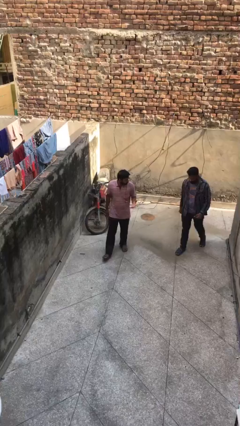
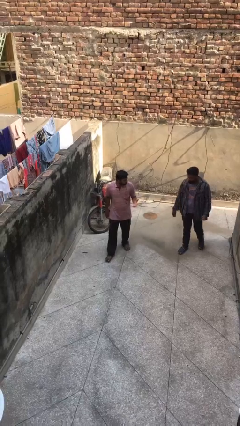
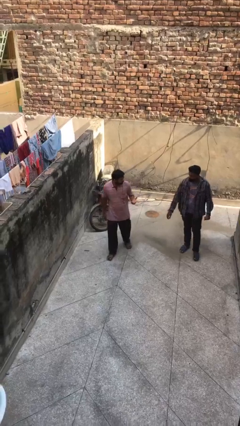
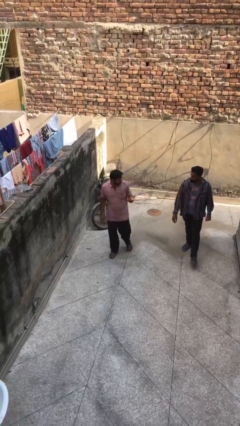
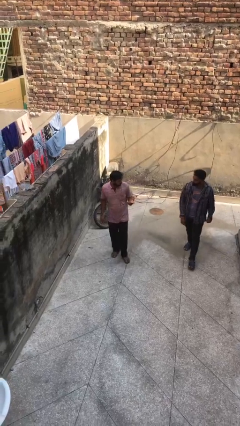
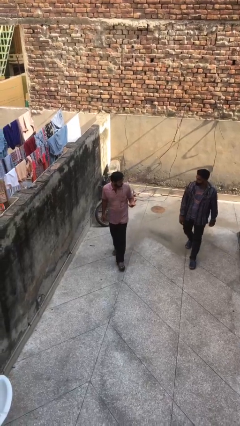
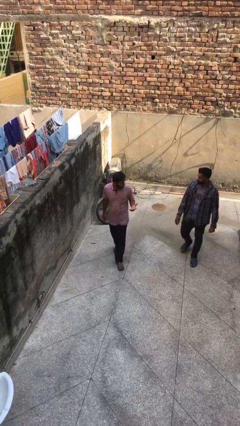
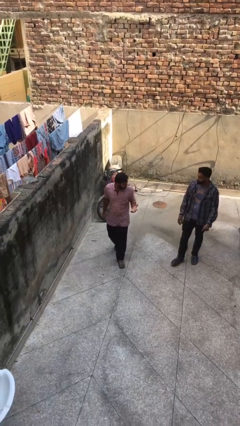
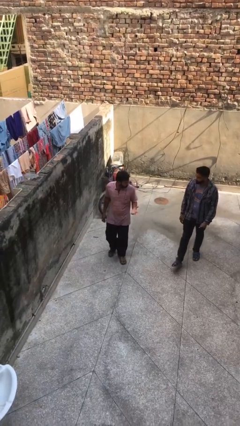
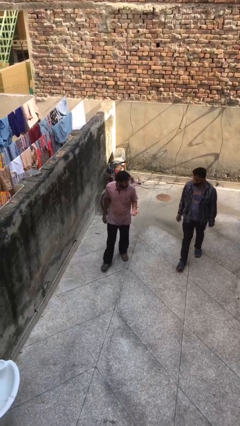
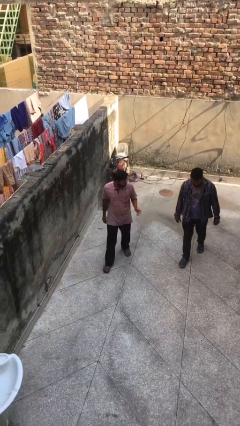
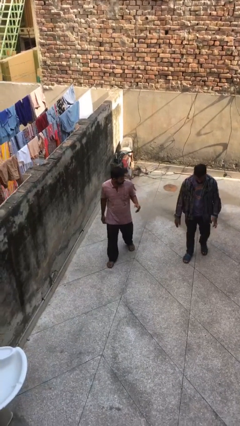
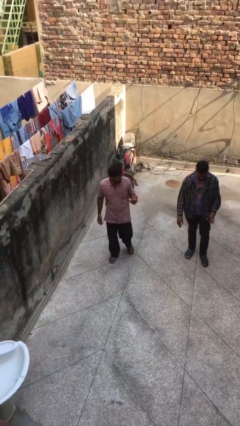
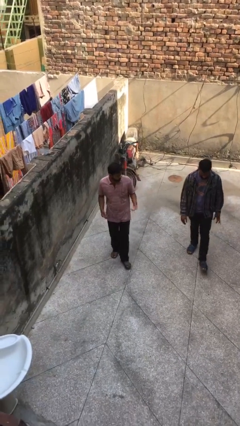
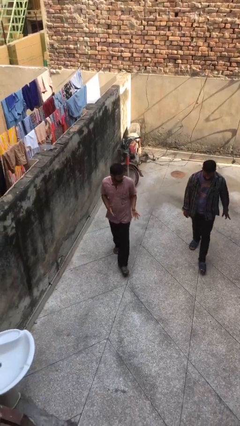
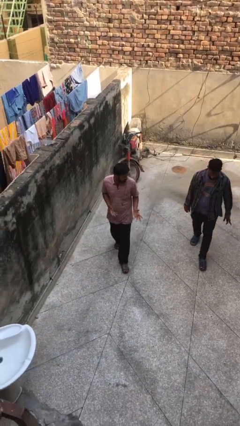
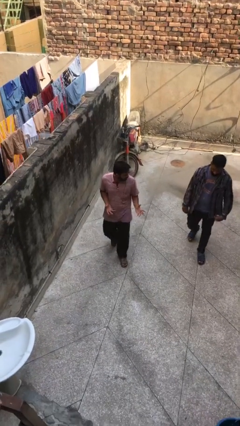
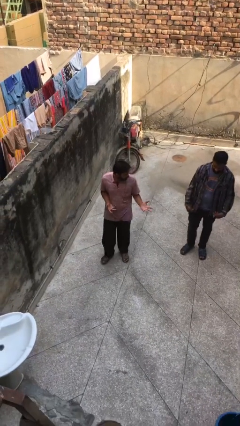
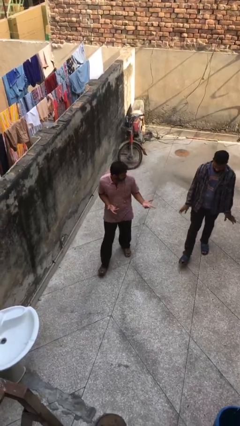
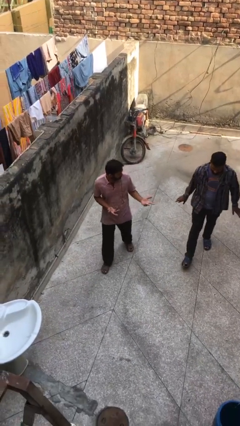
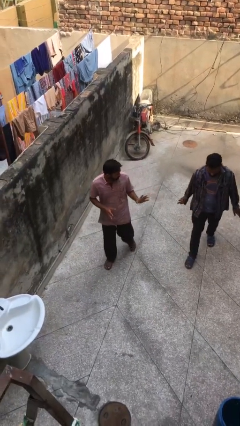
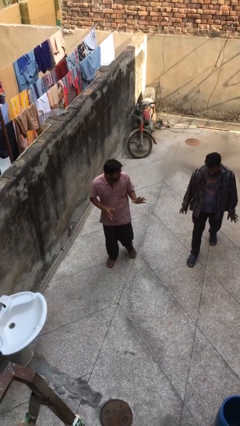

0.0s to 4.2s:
person talks to person

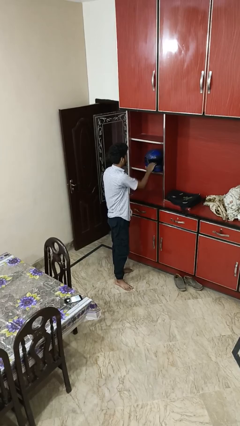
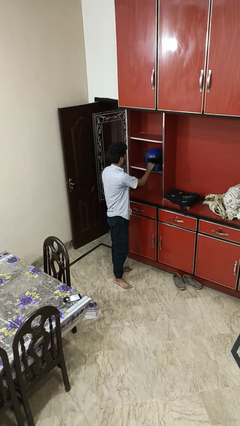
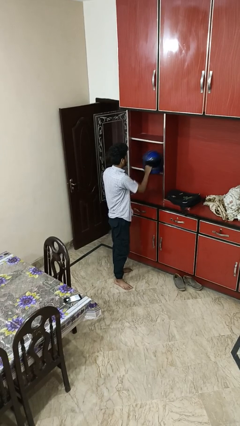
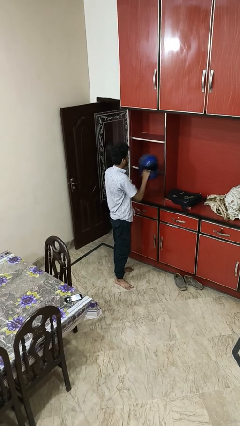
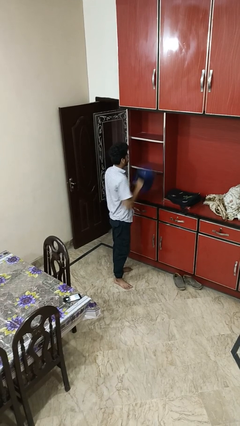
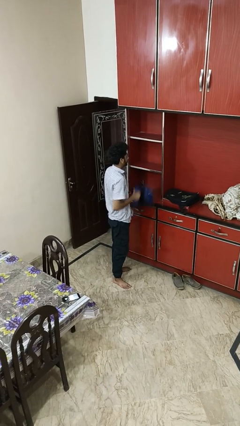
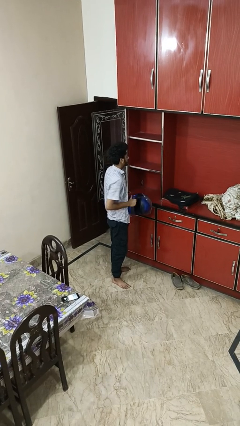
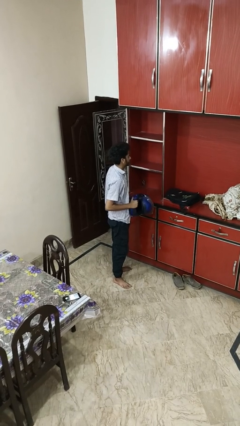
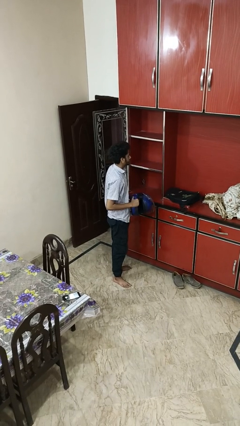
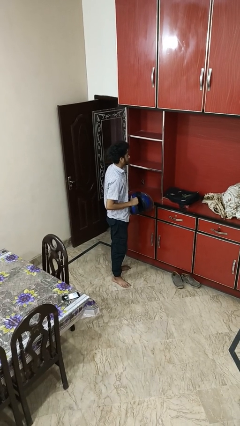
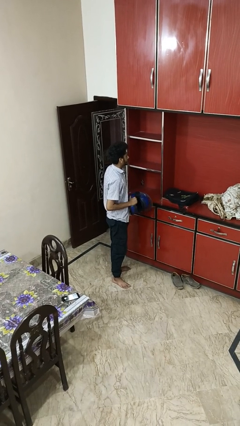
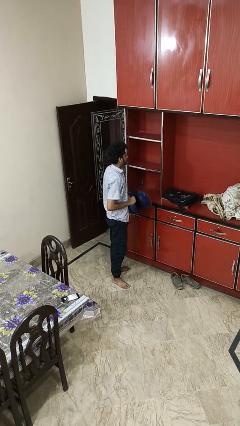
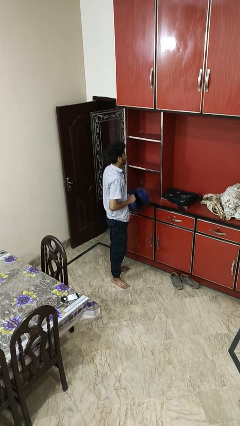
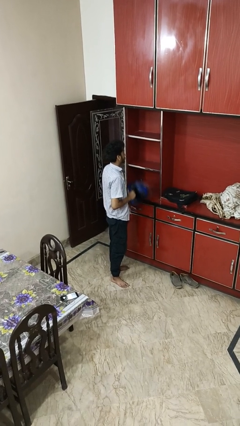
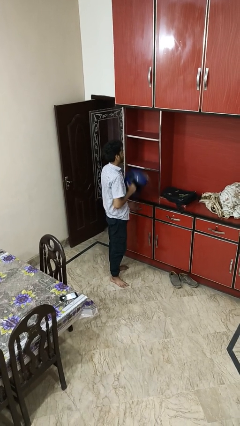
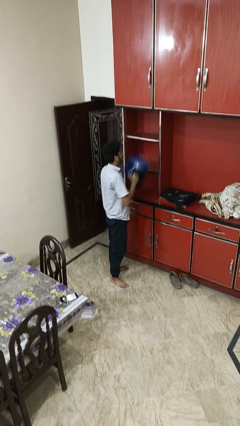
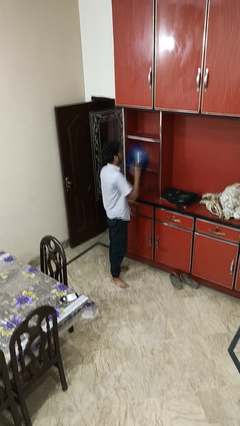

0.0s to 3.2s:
person picks up object from shelf

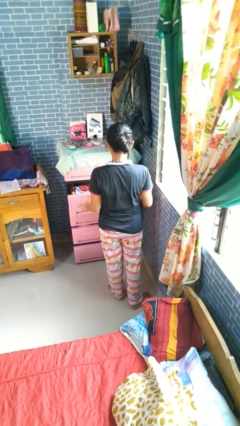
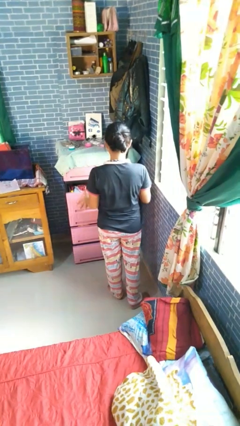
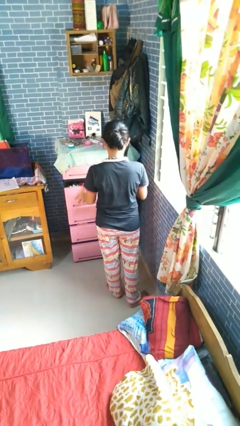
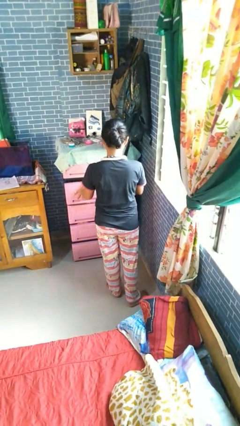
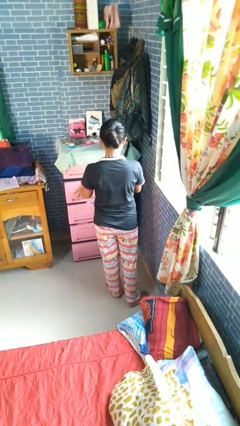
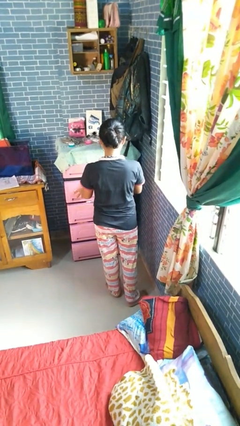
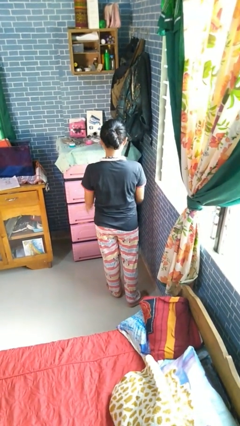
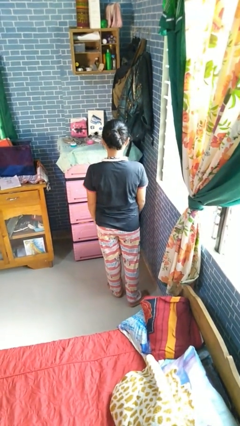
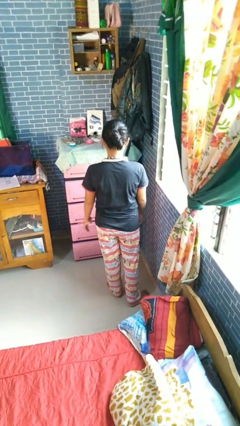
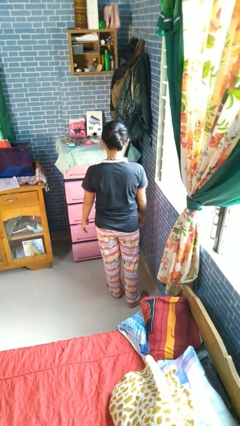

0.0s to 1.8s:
person closes dresser drawer

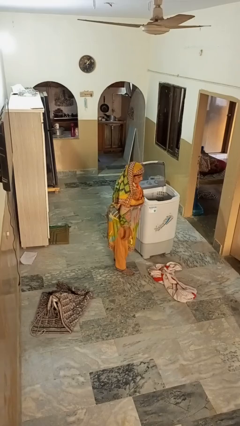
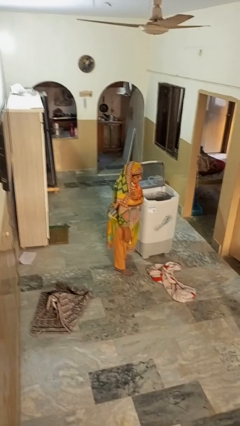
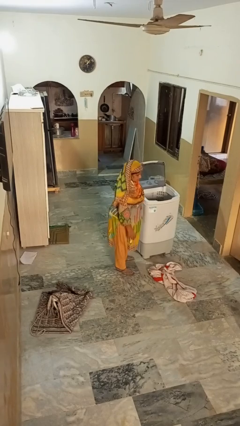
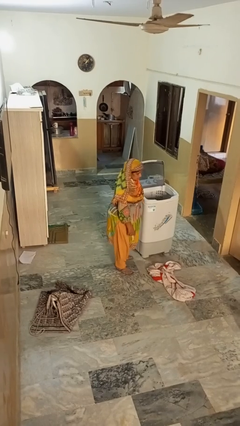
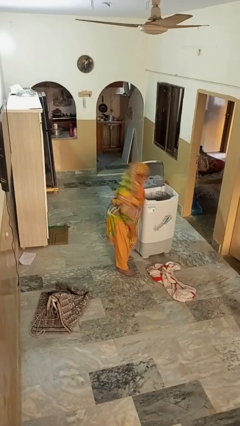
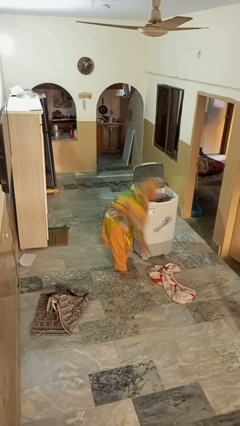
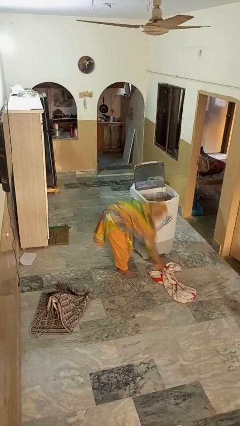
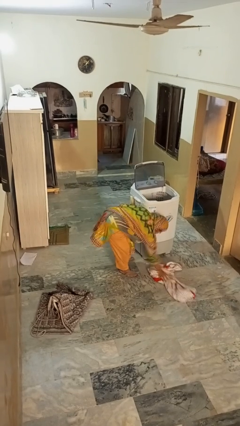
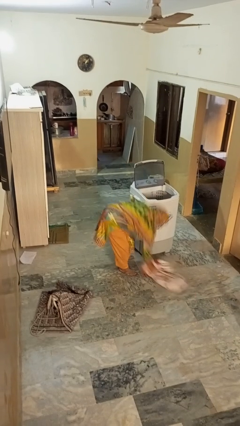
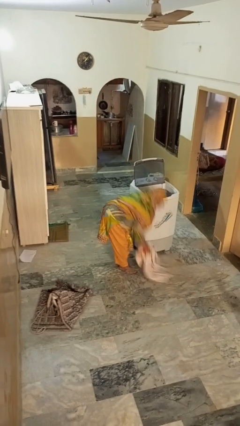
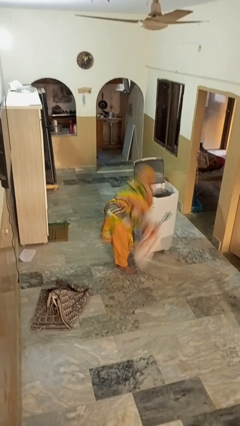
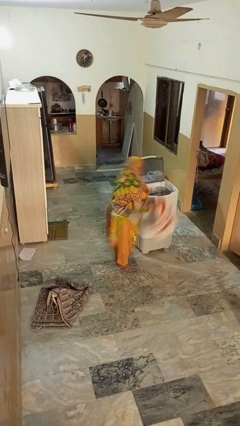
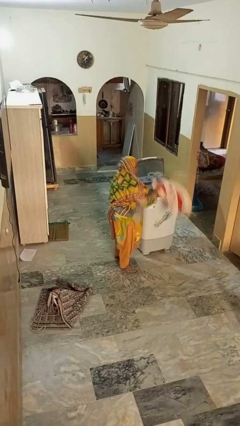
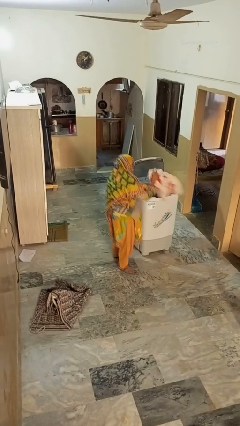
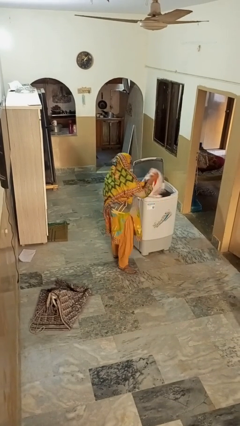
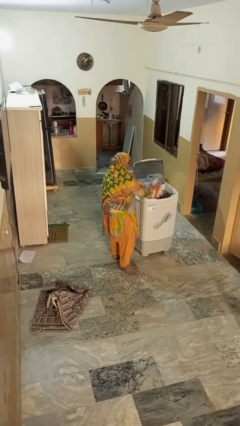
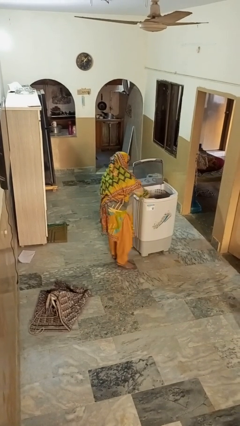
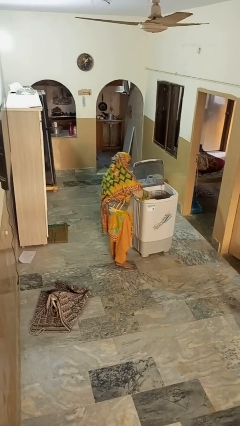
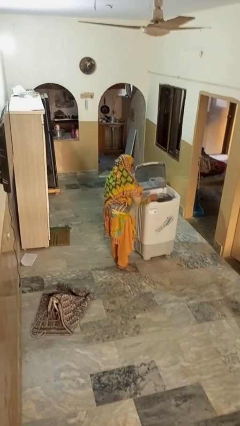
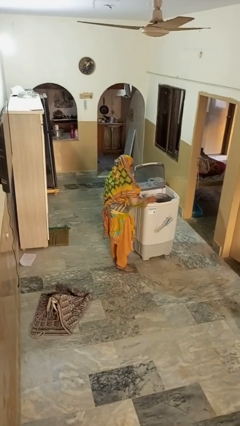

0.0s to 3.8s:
person loads clotheswasher

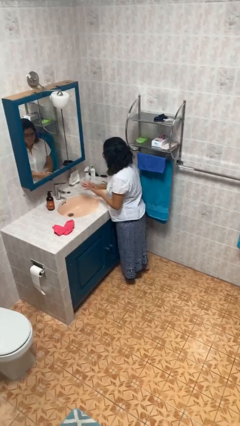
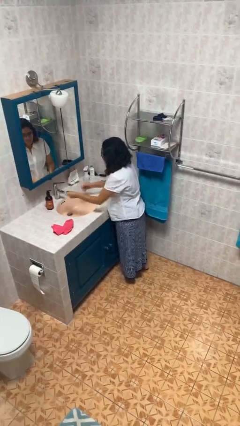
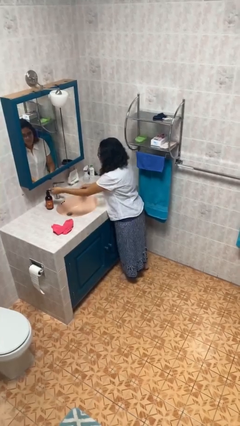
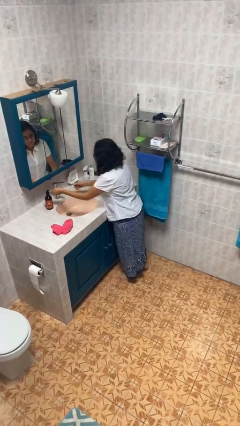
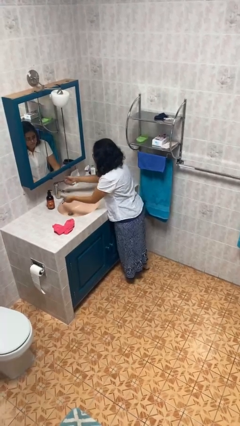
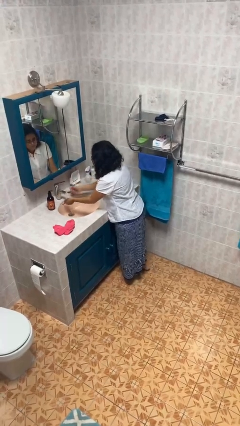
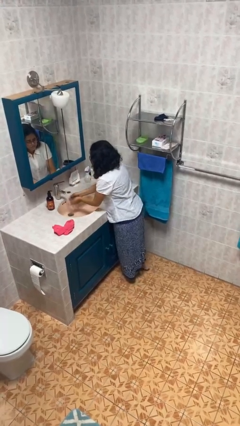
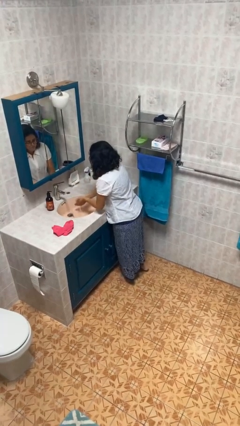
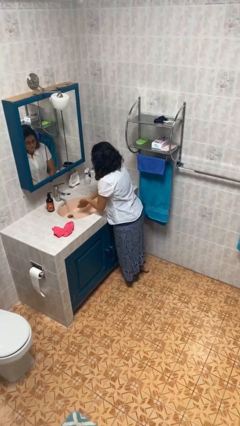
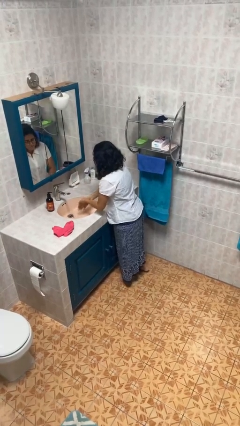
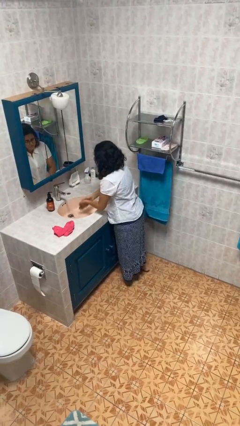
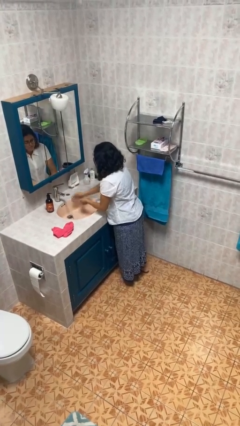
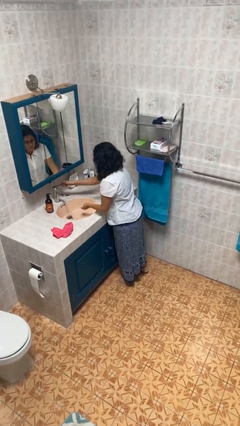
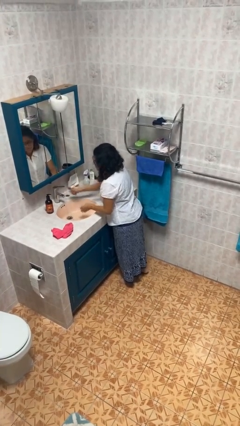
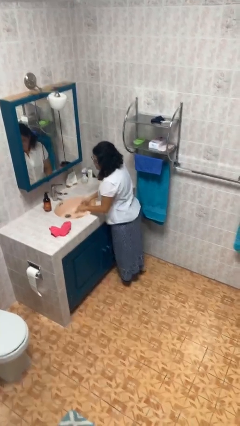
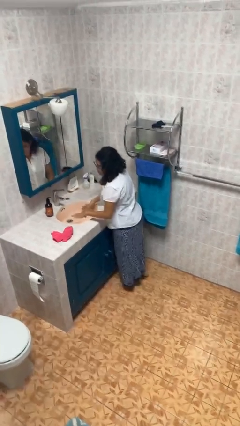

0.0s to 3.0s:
person washes hands

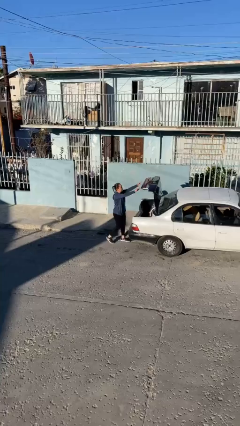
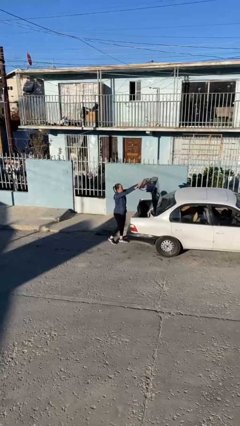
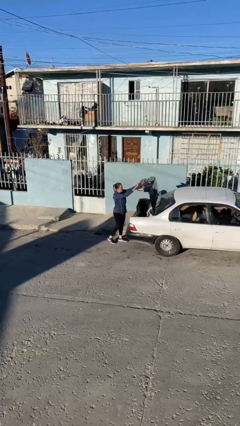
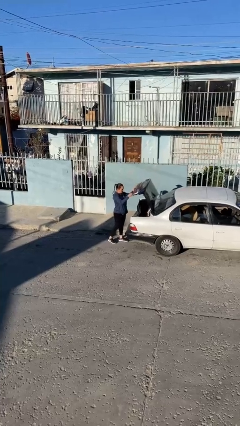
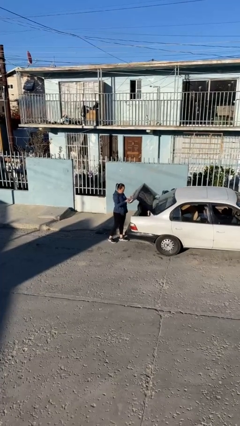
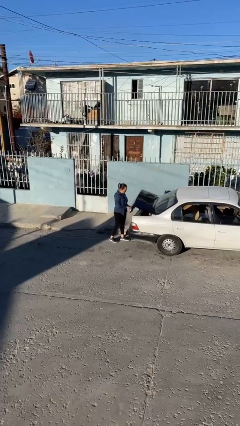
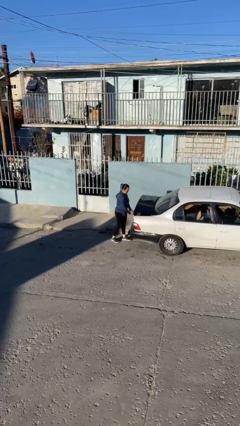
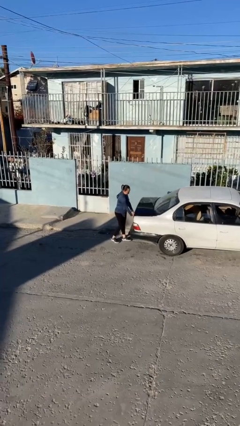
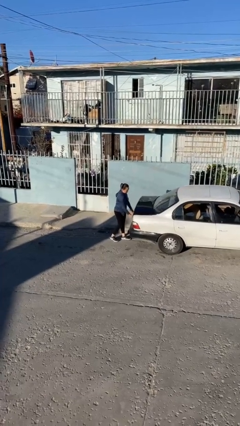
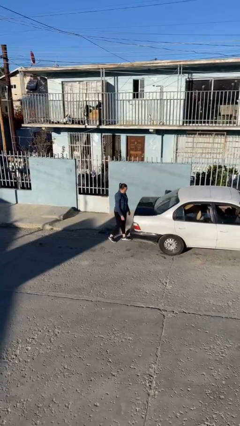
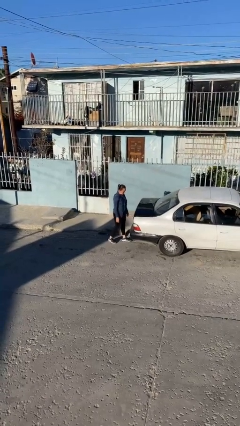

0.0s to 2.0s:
person closes car trunk
